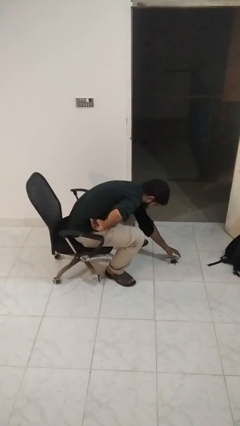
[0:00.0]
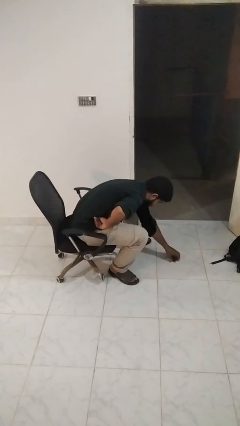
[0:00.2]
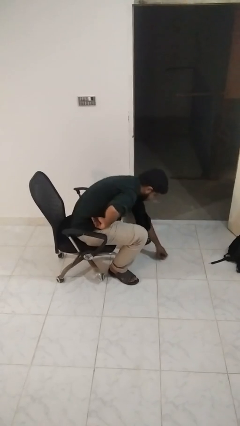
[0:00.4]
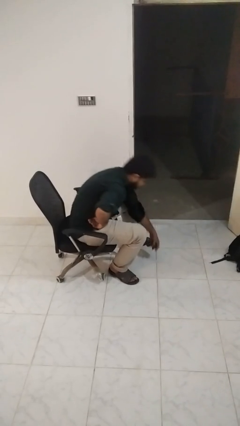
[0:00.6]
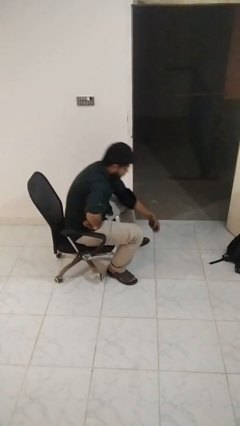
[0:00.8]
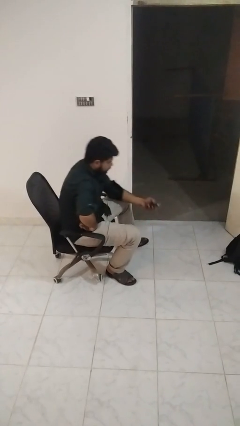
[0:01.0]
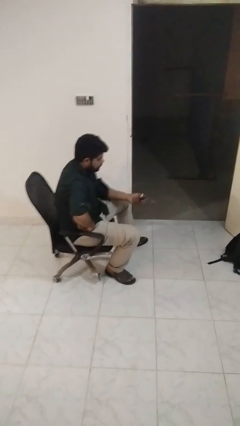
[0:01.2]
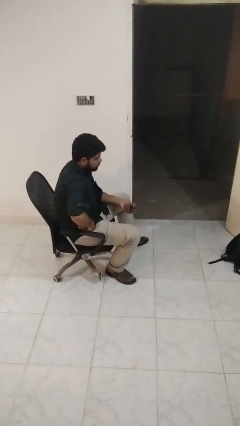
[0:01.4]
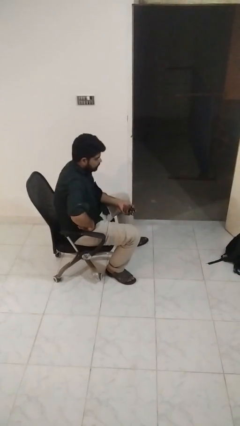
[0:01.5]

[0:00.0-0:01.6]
person picks up object from floor

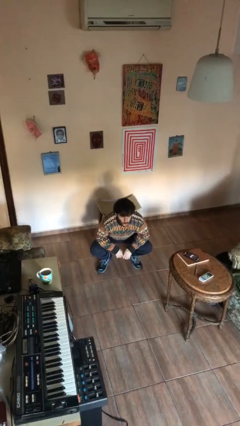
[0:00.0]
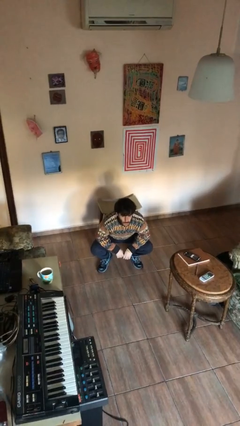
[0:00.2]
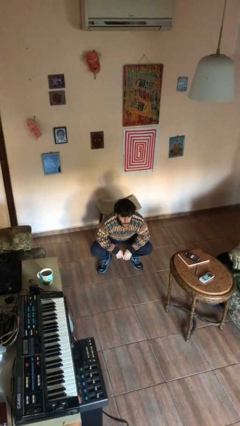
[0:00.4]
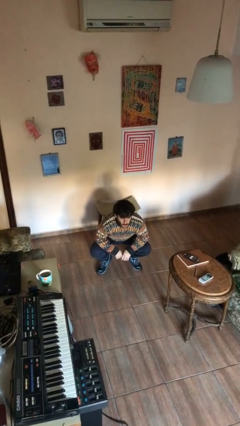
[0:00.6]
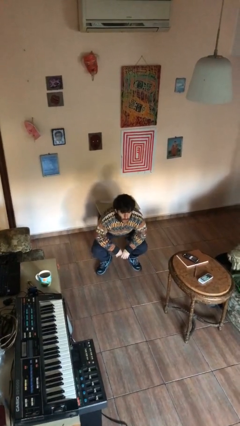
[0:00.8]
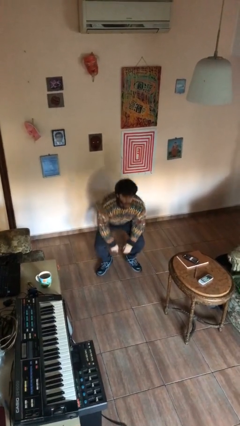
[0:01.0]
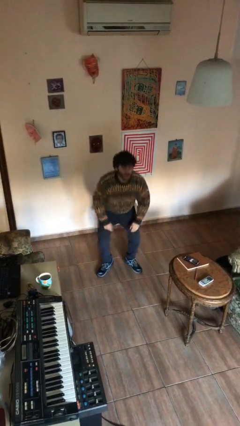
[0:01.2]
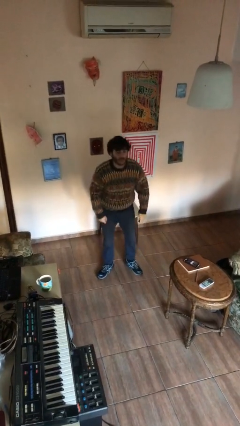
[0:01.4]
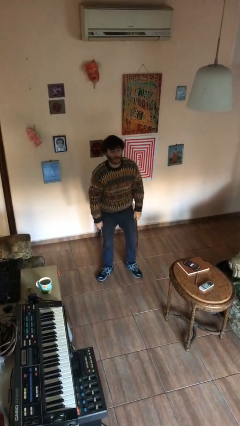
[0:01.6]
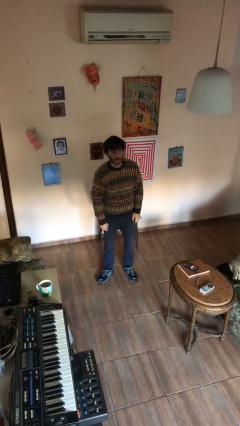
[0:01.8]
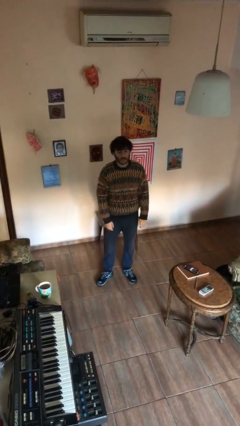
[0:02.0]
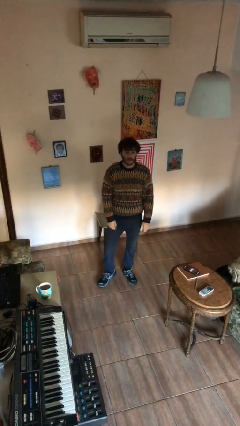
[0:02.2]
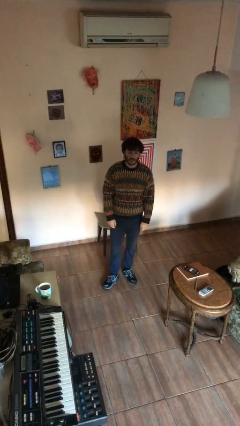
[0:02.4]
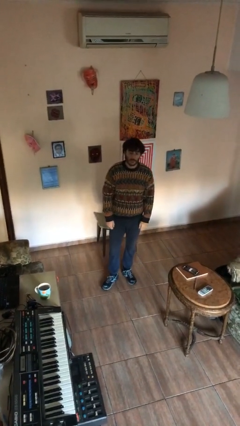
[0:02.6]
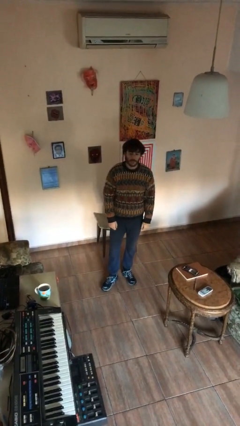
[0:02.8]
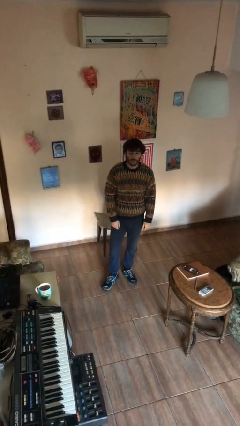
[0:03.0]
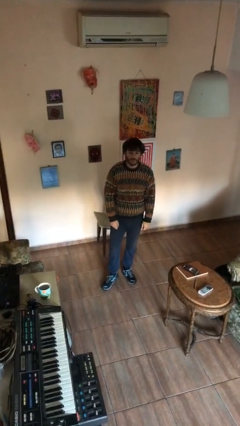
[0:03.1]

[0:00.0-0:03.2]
person stands up

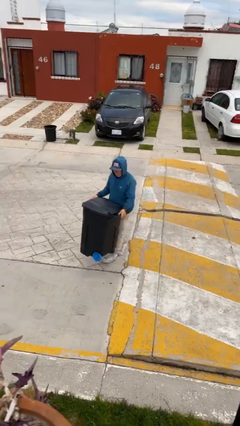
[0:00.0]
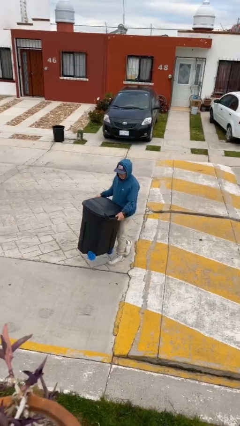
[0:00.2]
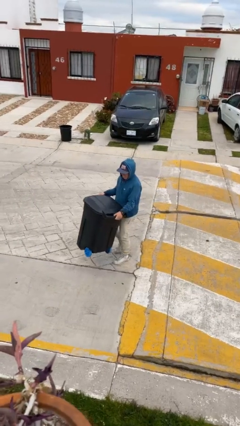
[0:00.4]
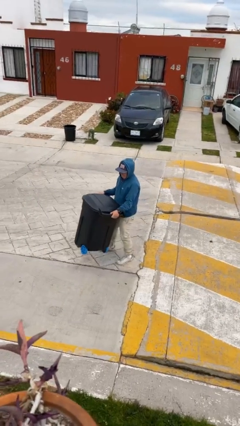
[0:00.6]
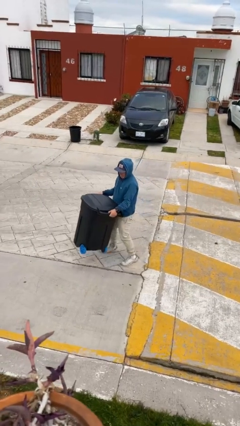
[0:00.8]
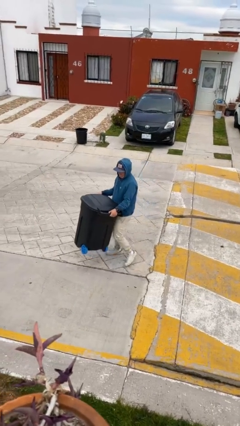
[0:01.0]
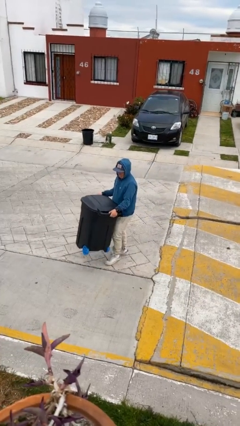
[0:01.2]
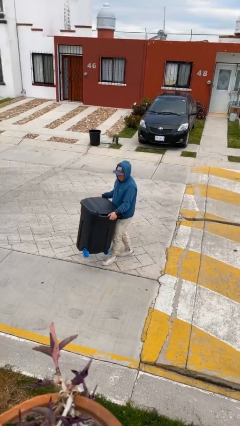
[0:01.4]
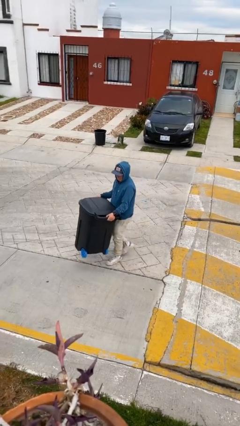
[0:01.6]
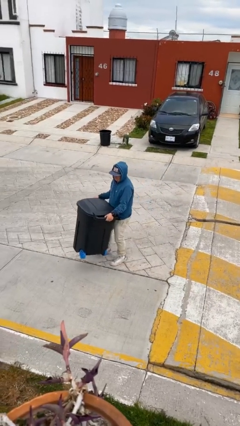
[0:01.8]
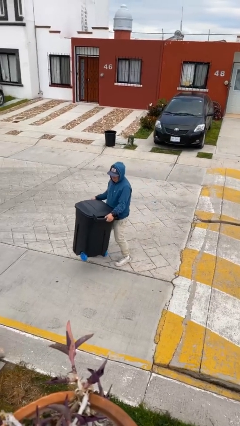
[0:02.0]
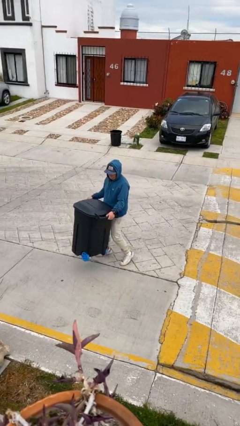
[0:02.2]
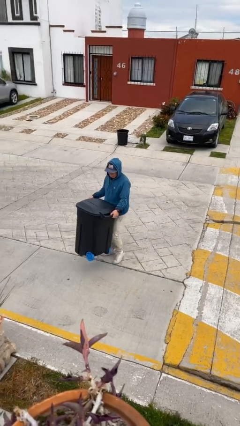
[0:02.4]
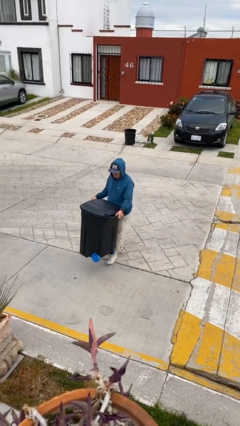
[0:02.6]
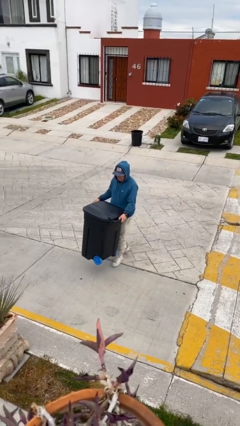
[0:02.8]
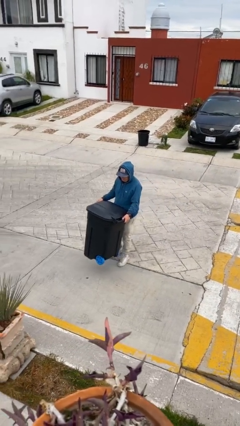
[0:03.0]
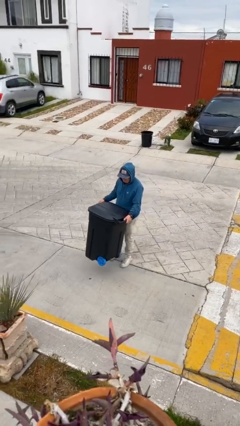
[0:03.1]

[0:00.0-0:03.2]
person carries heavy object

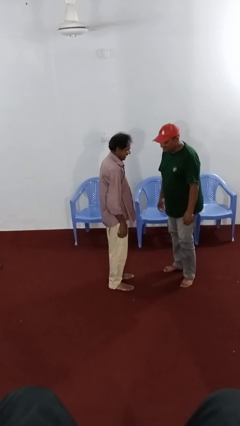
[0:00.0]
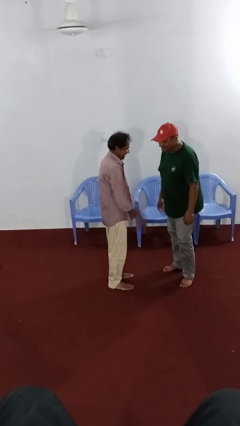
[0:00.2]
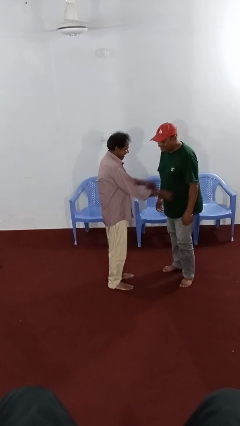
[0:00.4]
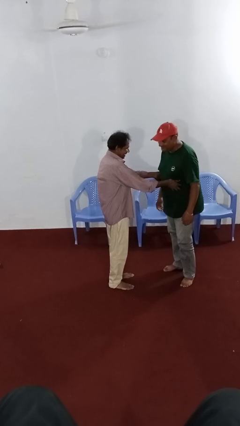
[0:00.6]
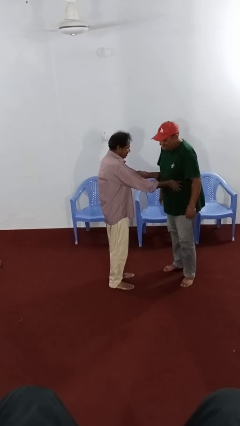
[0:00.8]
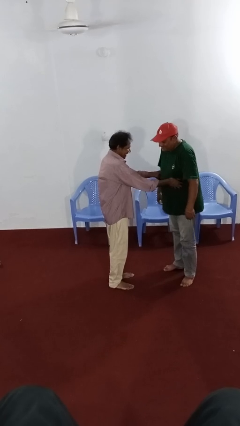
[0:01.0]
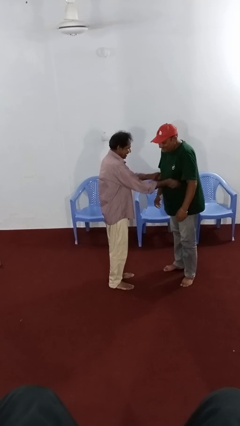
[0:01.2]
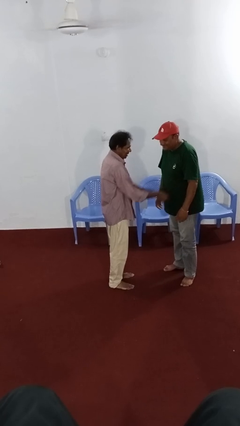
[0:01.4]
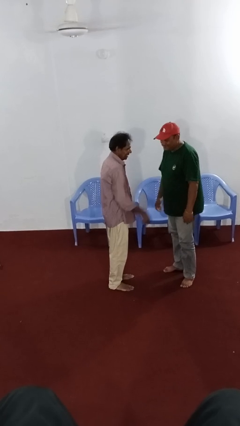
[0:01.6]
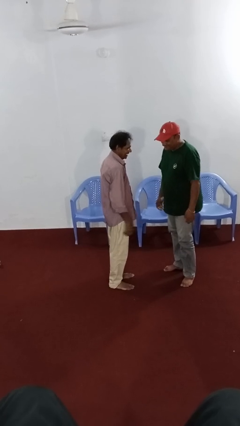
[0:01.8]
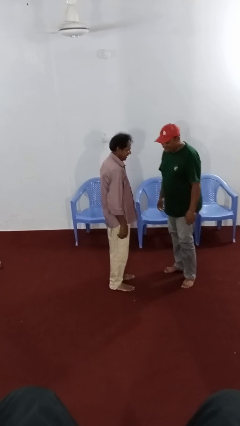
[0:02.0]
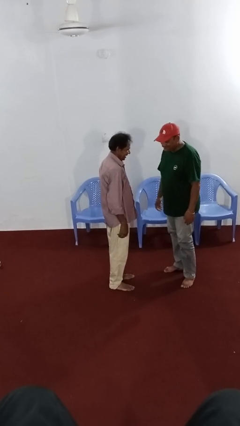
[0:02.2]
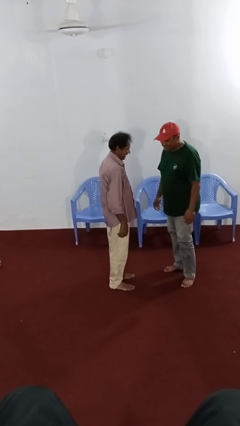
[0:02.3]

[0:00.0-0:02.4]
person tickles person

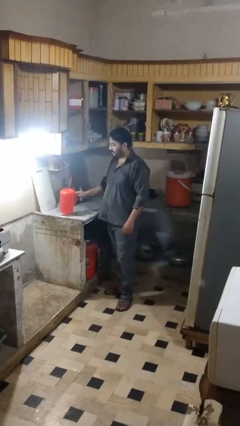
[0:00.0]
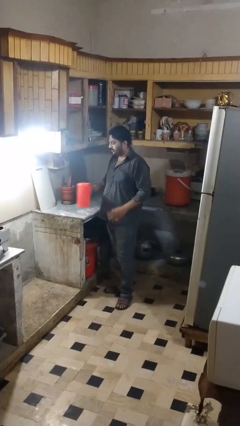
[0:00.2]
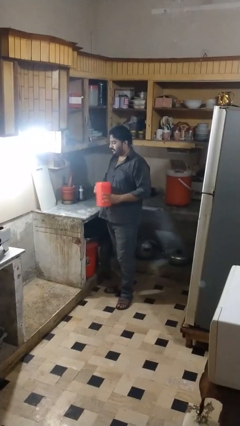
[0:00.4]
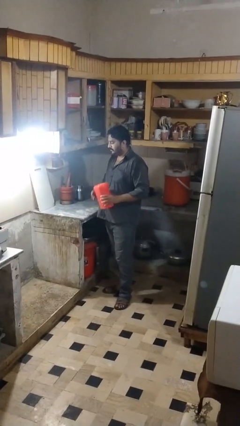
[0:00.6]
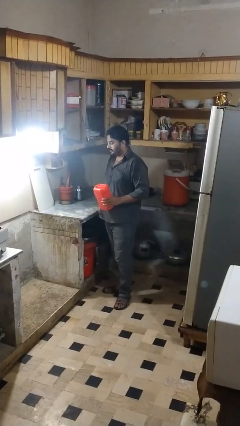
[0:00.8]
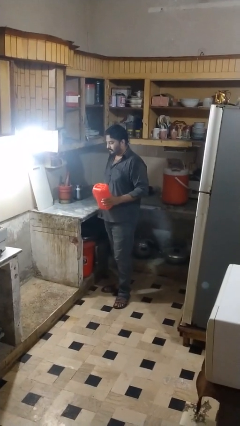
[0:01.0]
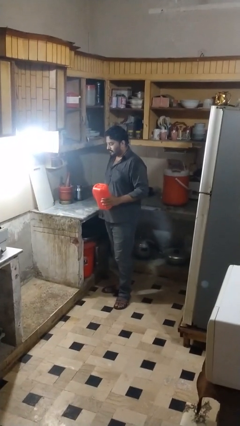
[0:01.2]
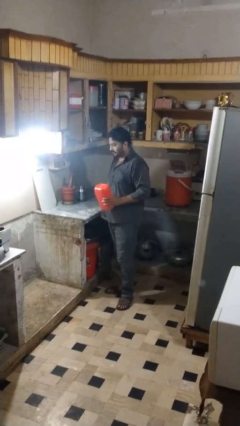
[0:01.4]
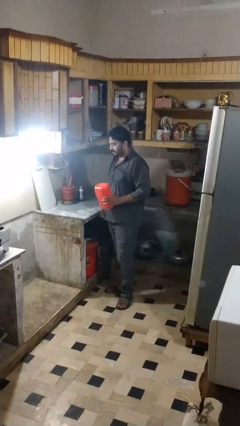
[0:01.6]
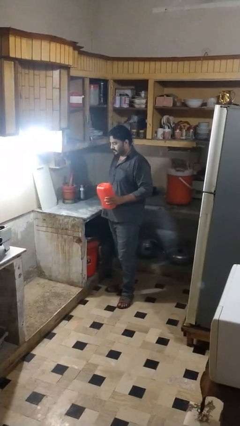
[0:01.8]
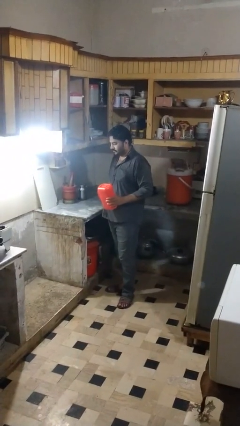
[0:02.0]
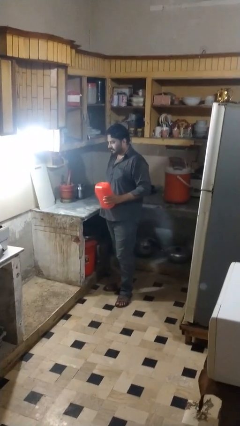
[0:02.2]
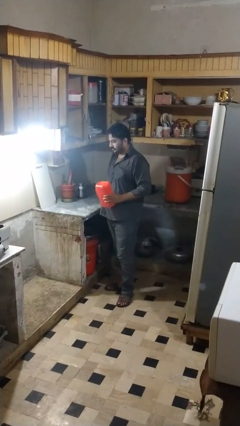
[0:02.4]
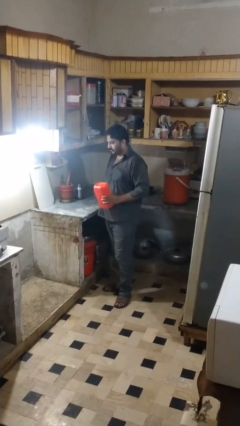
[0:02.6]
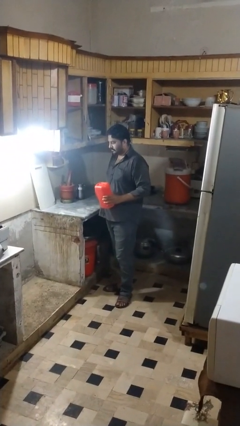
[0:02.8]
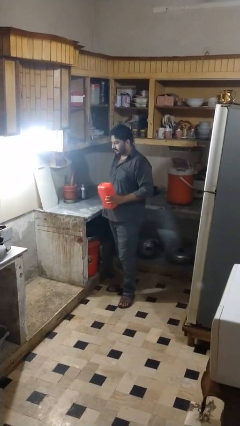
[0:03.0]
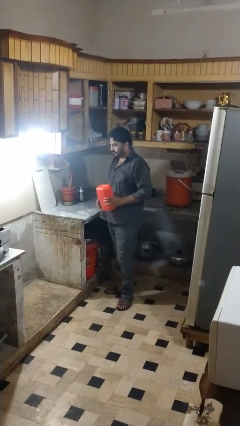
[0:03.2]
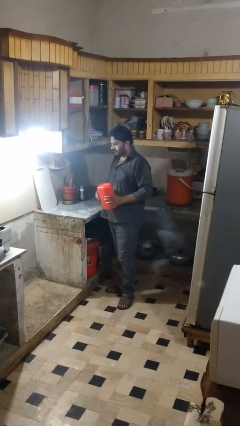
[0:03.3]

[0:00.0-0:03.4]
person picks up object from countertop

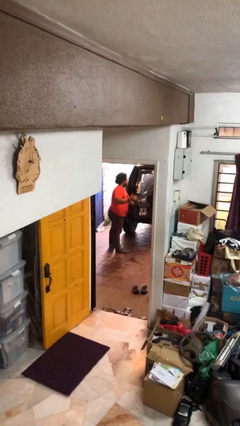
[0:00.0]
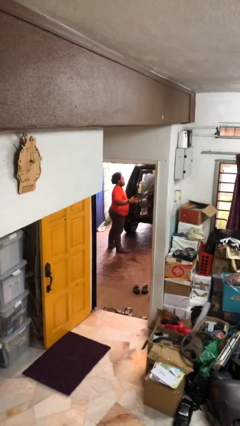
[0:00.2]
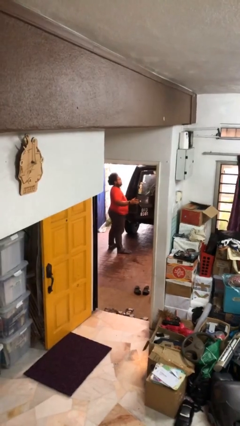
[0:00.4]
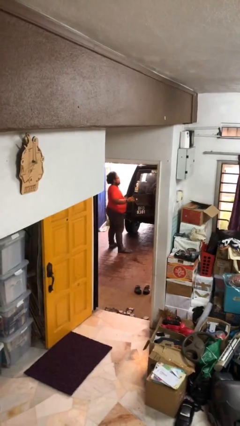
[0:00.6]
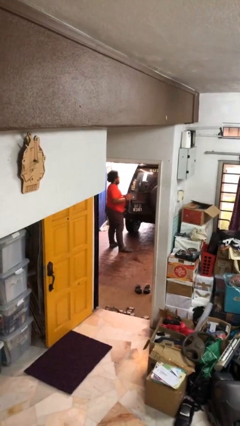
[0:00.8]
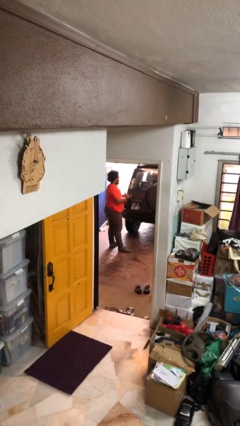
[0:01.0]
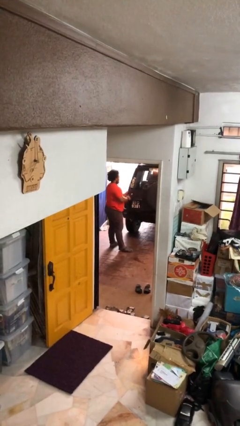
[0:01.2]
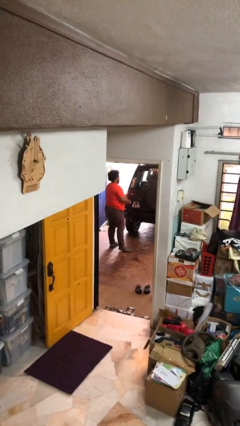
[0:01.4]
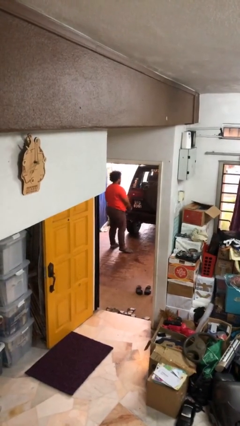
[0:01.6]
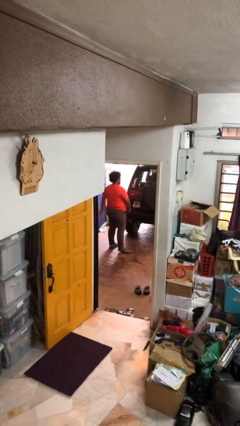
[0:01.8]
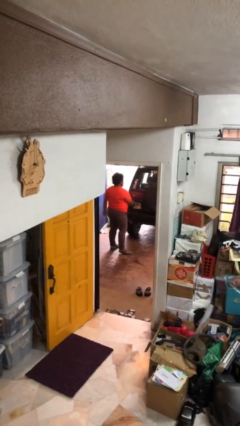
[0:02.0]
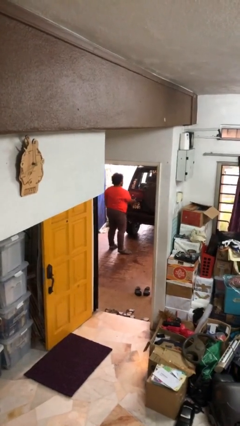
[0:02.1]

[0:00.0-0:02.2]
person closes car trunk

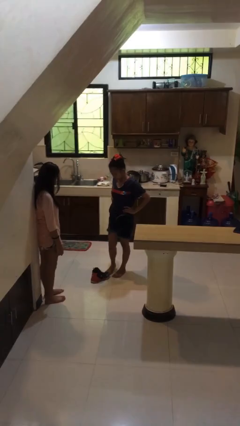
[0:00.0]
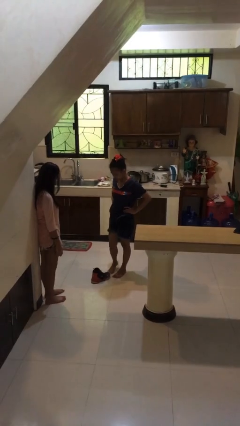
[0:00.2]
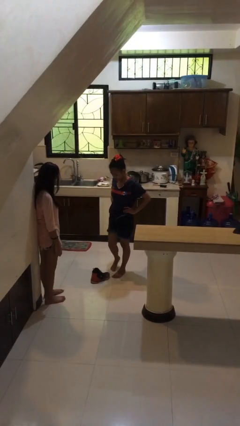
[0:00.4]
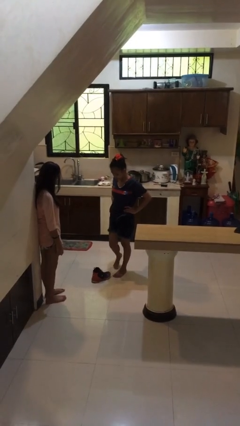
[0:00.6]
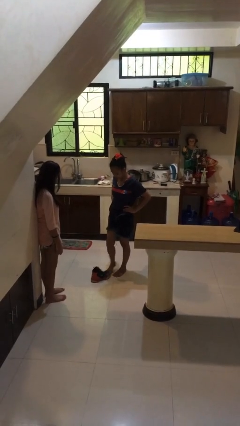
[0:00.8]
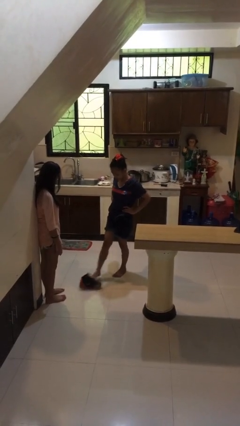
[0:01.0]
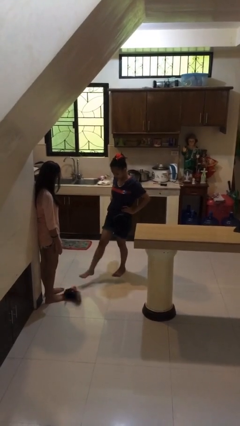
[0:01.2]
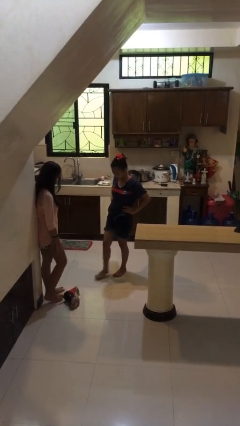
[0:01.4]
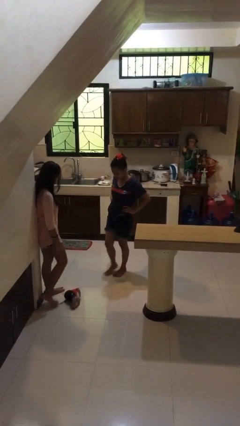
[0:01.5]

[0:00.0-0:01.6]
person kicks object to person
